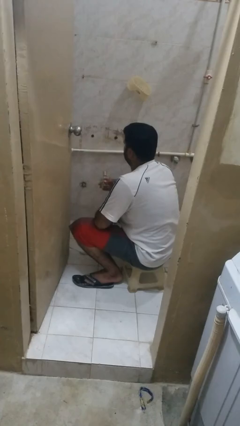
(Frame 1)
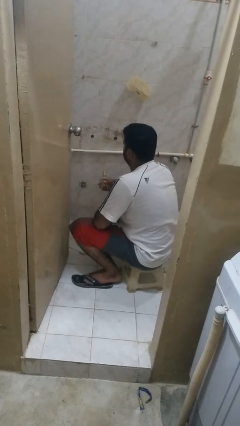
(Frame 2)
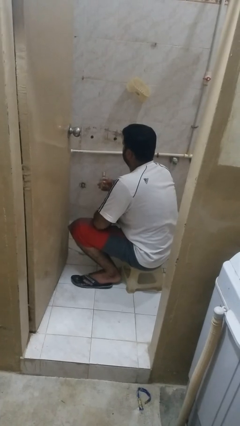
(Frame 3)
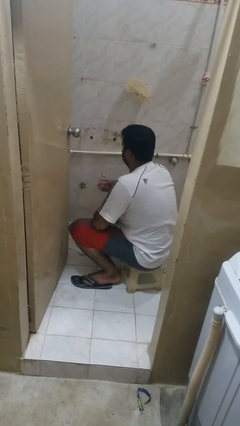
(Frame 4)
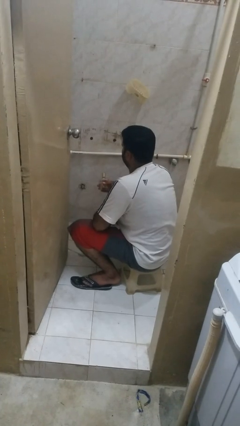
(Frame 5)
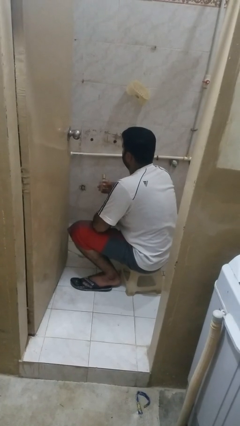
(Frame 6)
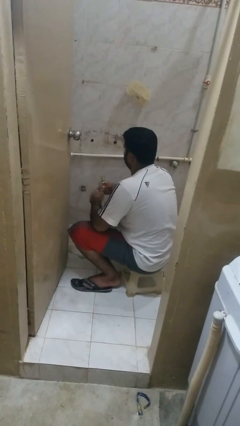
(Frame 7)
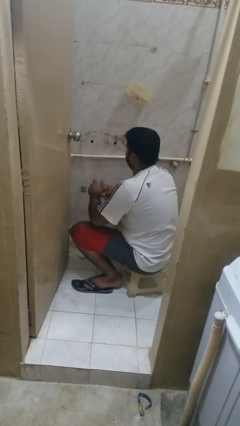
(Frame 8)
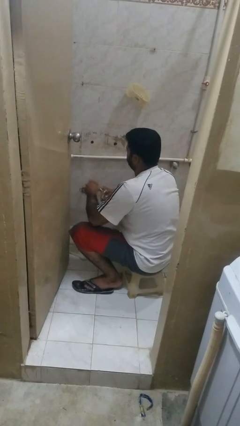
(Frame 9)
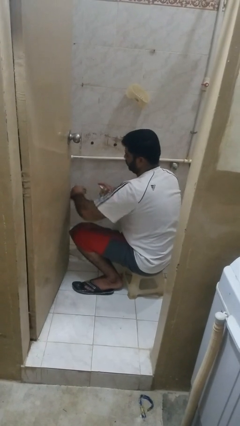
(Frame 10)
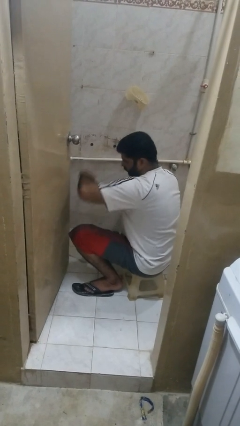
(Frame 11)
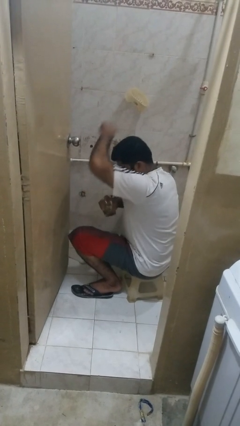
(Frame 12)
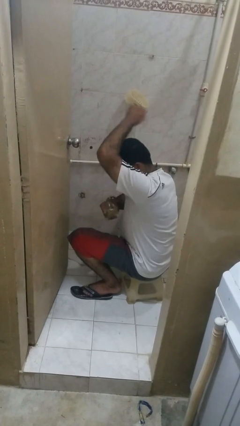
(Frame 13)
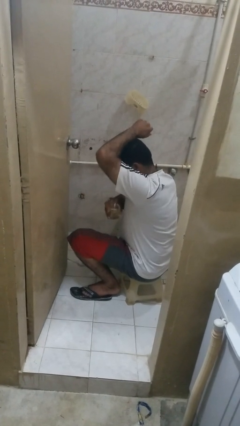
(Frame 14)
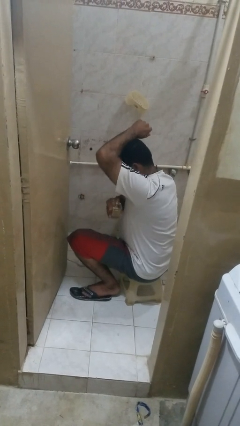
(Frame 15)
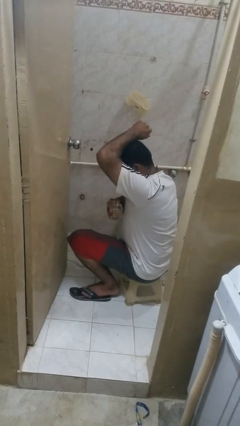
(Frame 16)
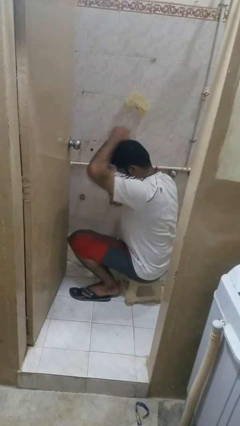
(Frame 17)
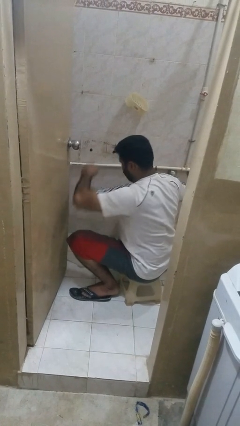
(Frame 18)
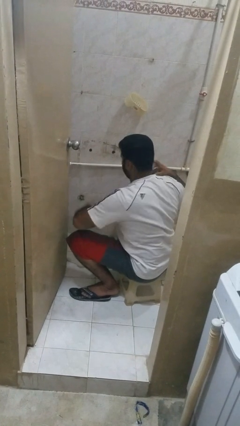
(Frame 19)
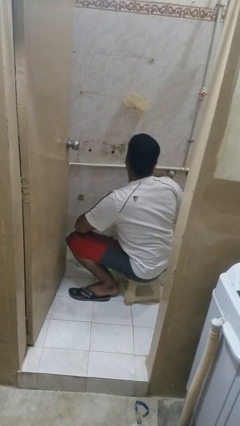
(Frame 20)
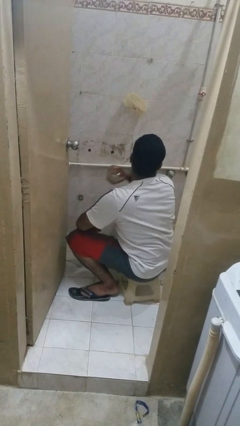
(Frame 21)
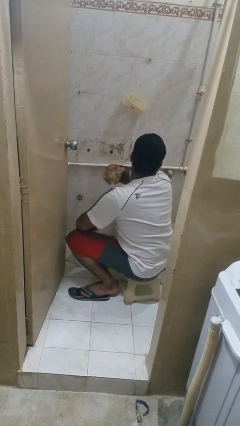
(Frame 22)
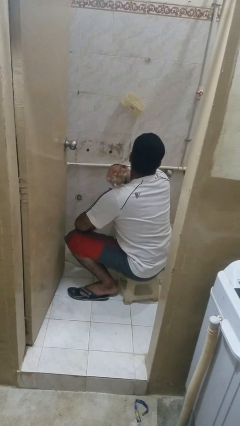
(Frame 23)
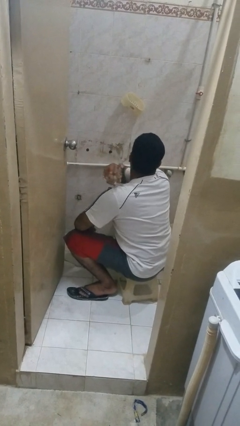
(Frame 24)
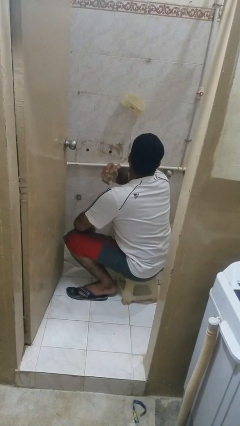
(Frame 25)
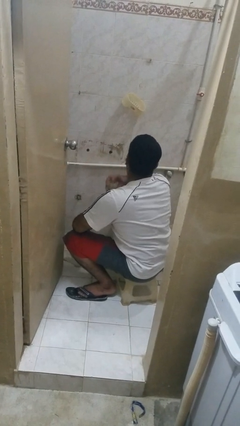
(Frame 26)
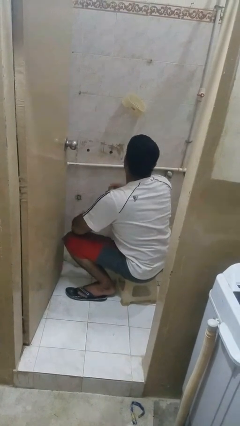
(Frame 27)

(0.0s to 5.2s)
person applies deodorant

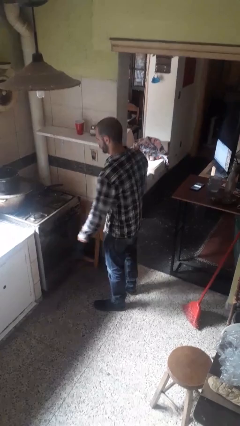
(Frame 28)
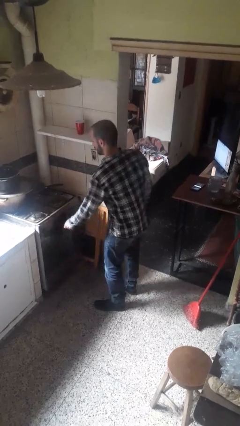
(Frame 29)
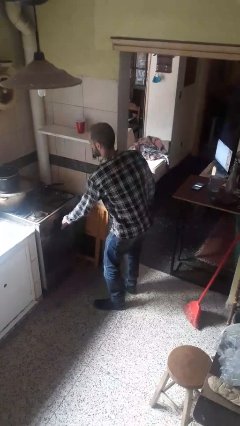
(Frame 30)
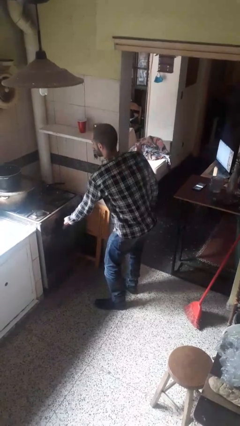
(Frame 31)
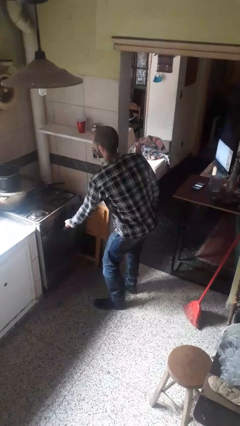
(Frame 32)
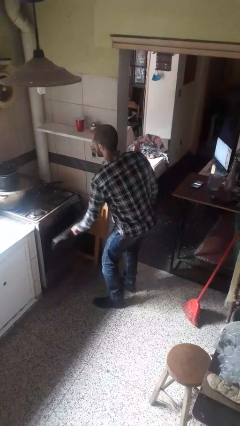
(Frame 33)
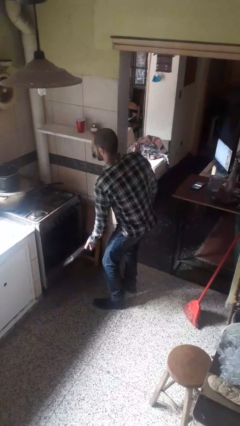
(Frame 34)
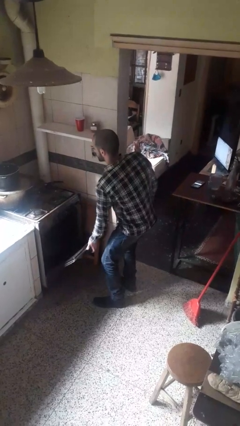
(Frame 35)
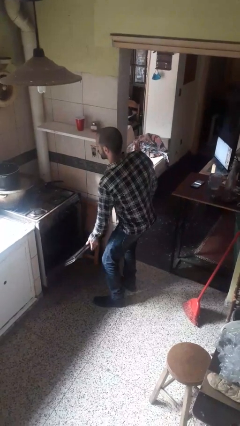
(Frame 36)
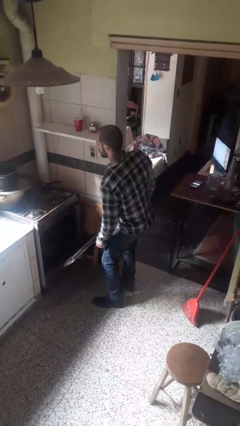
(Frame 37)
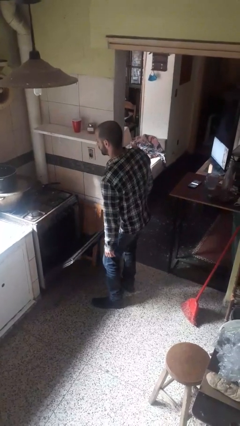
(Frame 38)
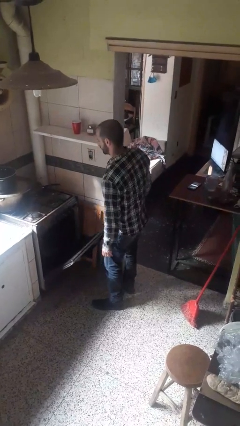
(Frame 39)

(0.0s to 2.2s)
person opens oven door

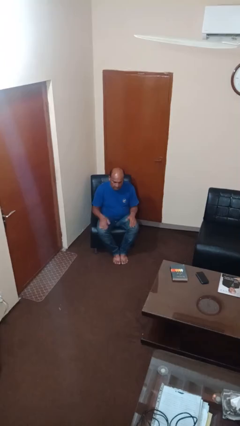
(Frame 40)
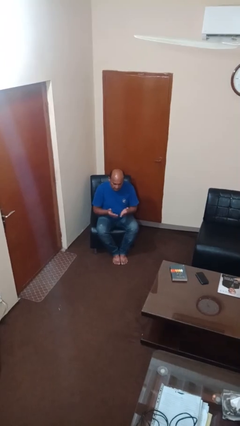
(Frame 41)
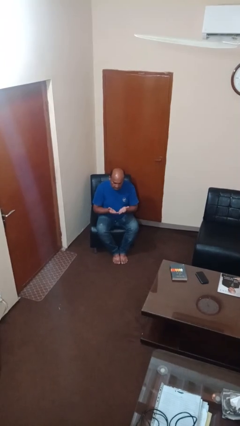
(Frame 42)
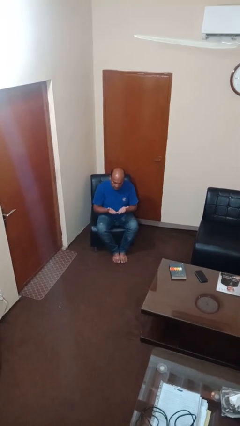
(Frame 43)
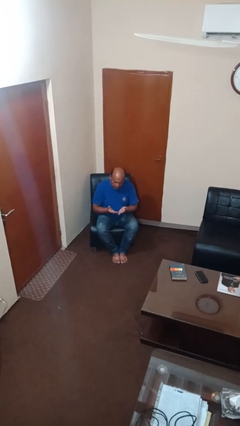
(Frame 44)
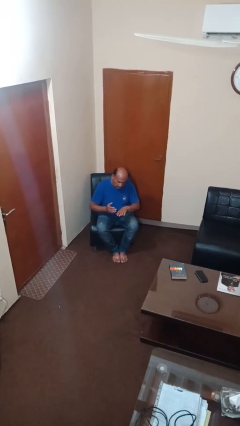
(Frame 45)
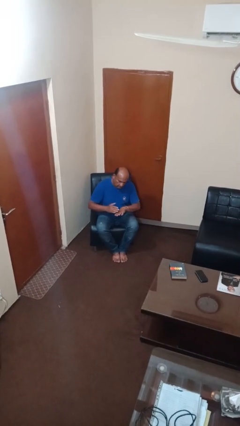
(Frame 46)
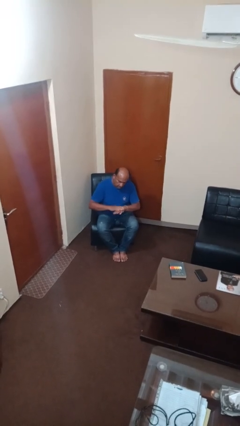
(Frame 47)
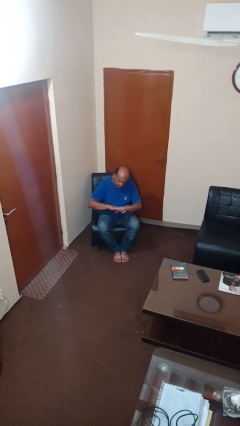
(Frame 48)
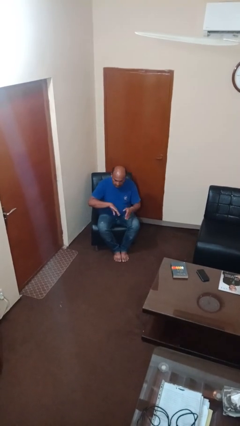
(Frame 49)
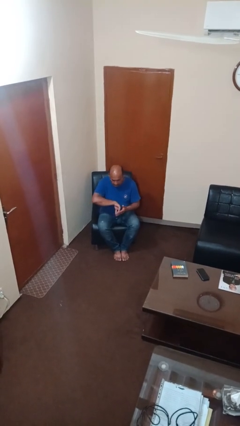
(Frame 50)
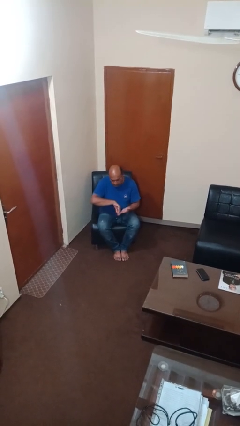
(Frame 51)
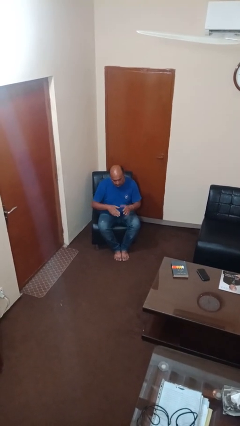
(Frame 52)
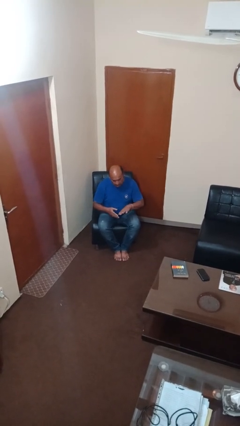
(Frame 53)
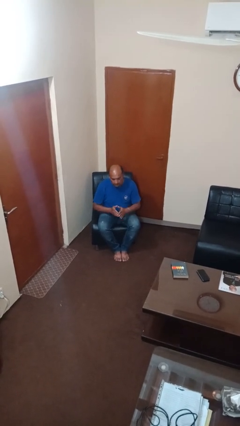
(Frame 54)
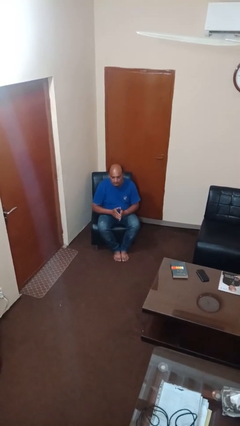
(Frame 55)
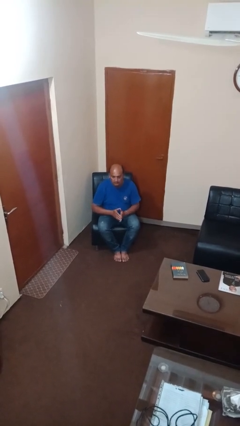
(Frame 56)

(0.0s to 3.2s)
person looks at hands in lap

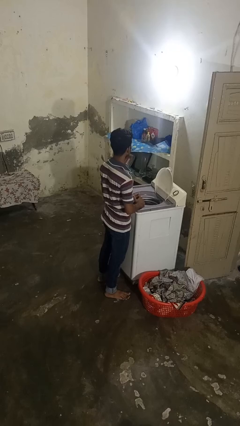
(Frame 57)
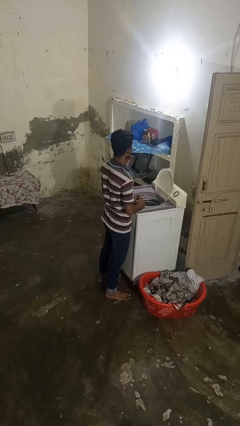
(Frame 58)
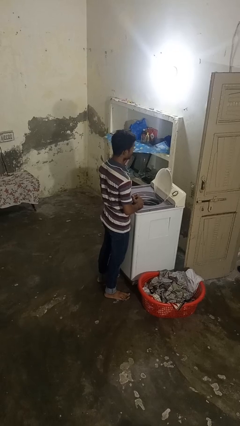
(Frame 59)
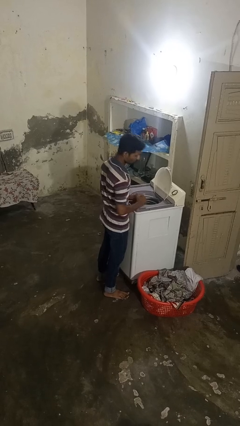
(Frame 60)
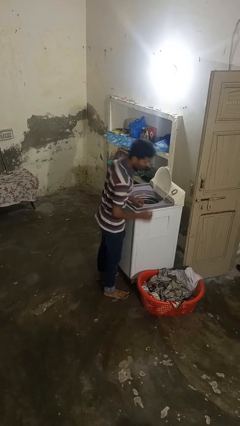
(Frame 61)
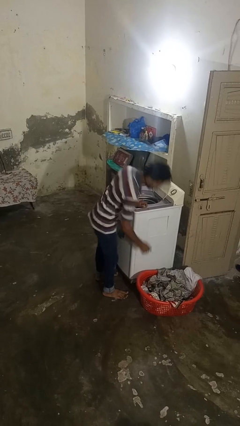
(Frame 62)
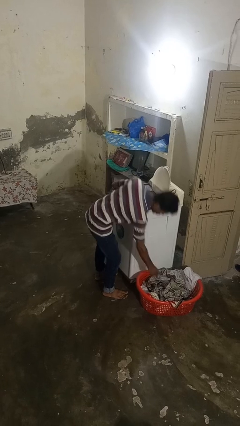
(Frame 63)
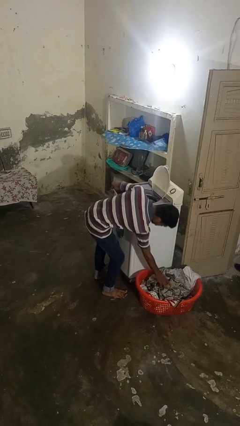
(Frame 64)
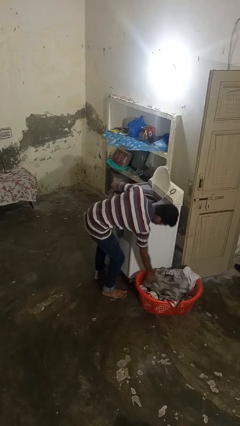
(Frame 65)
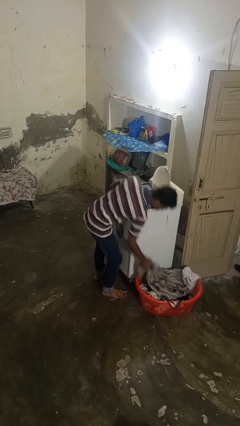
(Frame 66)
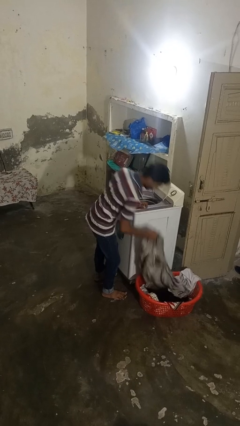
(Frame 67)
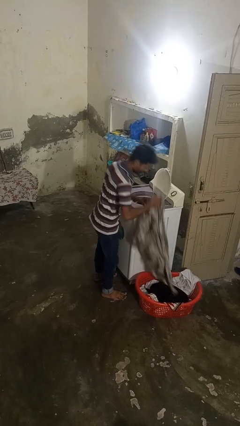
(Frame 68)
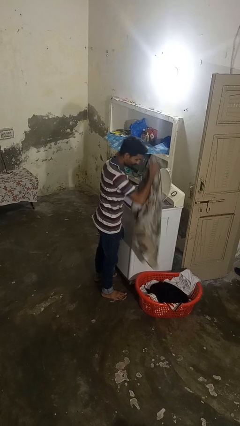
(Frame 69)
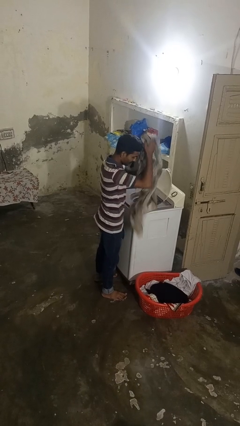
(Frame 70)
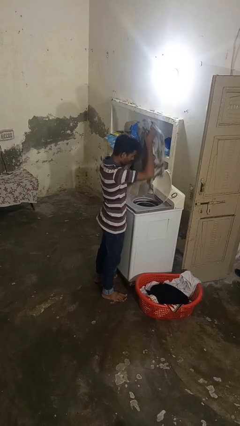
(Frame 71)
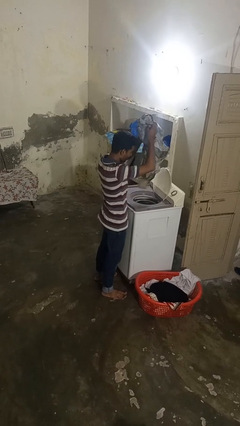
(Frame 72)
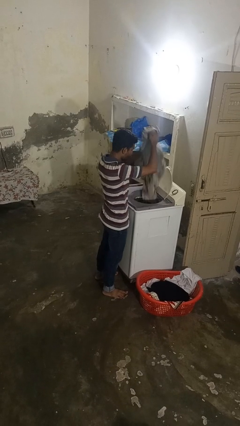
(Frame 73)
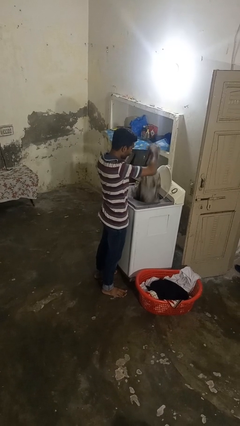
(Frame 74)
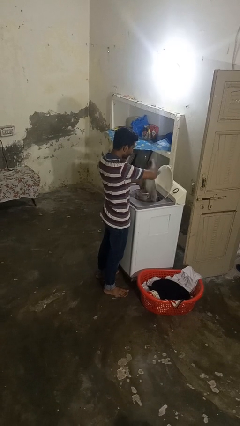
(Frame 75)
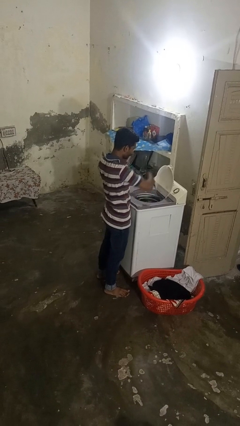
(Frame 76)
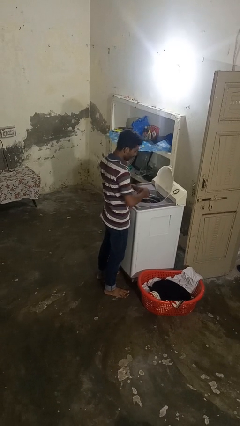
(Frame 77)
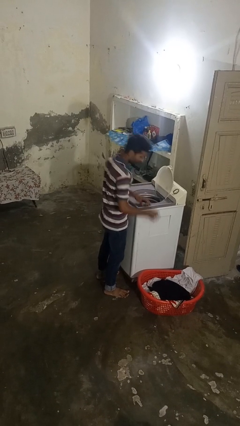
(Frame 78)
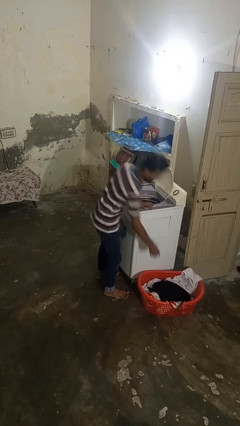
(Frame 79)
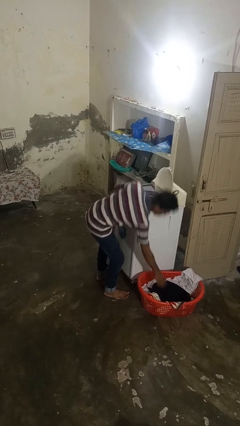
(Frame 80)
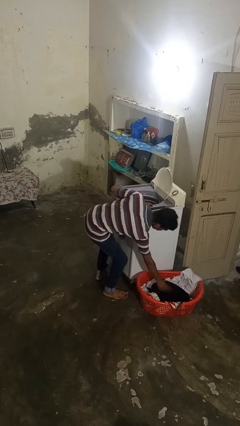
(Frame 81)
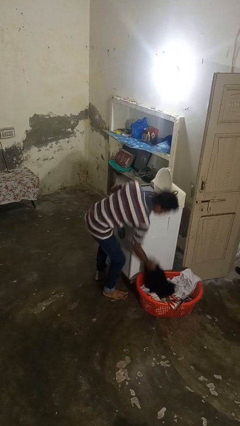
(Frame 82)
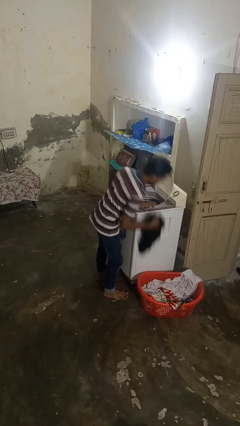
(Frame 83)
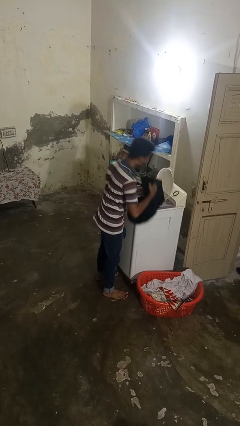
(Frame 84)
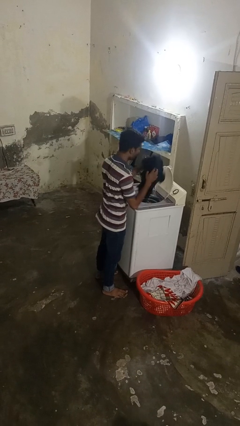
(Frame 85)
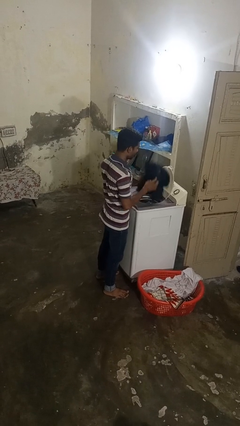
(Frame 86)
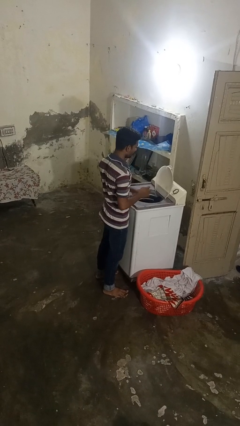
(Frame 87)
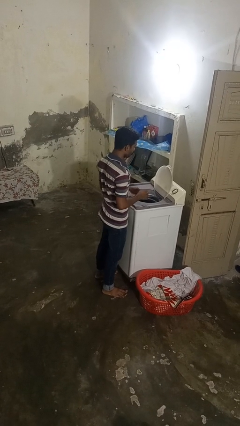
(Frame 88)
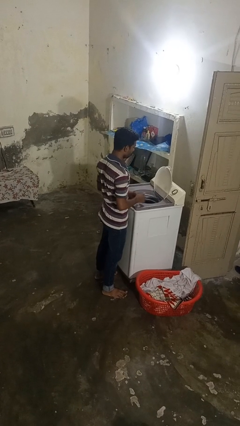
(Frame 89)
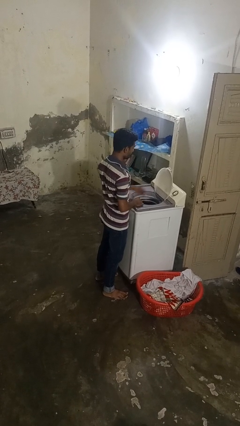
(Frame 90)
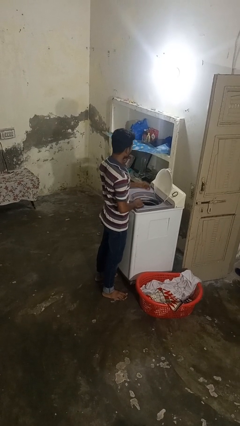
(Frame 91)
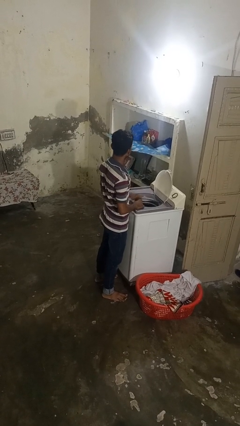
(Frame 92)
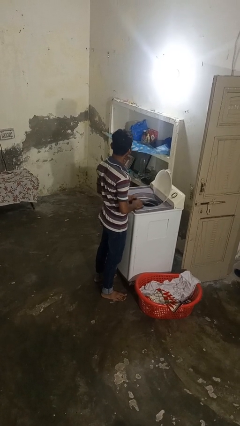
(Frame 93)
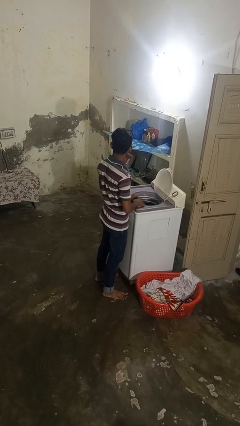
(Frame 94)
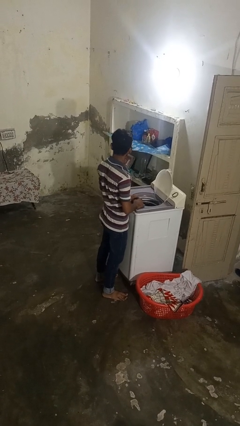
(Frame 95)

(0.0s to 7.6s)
person loads dryer
